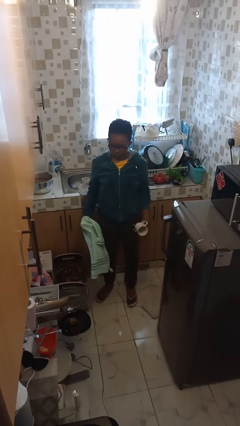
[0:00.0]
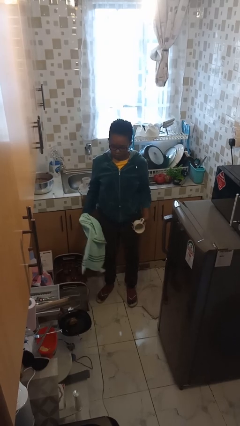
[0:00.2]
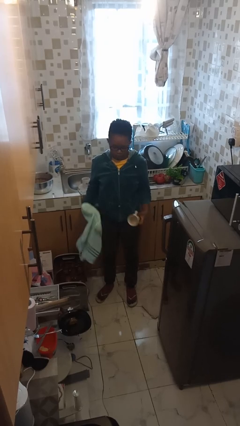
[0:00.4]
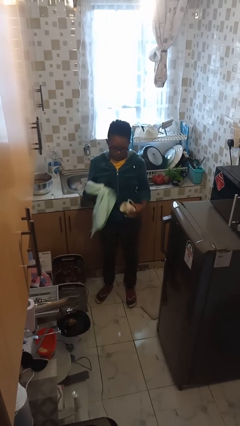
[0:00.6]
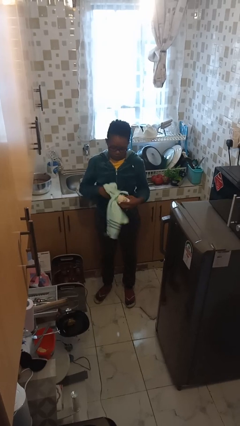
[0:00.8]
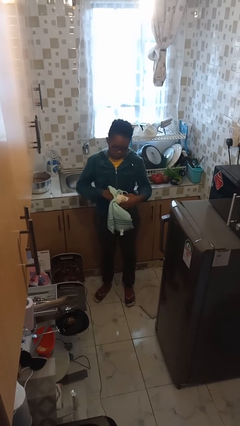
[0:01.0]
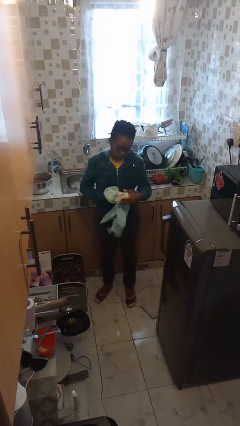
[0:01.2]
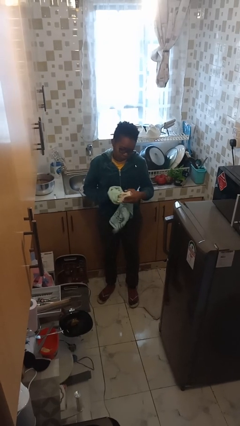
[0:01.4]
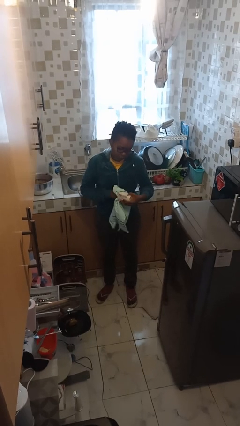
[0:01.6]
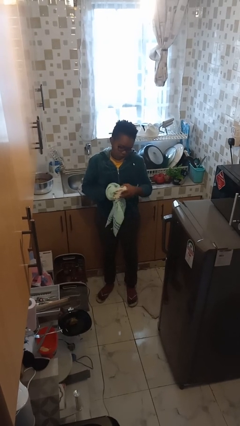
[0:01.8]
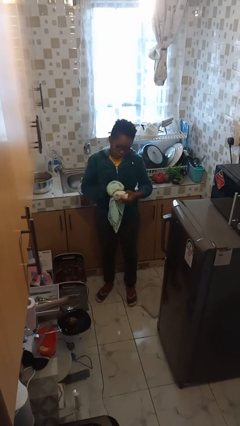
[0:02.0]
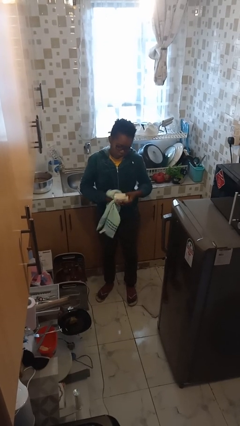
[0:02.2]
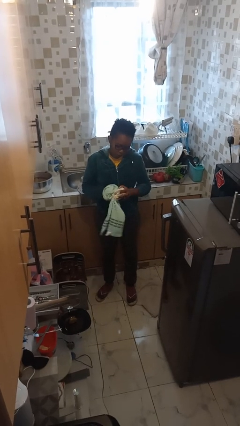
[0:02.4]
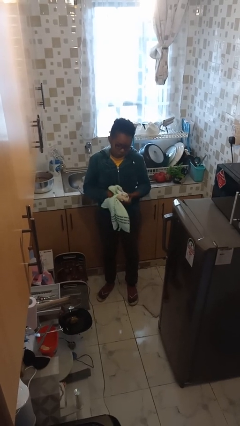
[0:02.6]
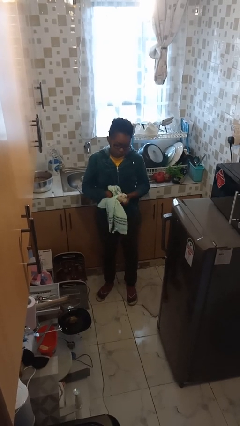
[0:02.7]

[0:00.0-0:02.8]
person dries dish

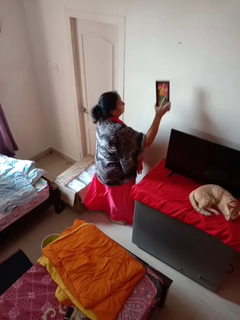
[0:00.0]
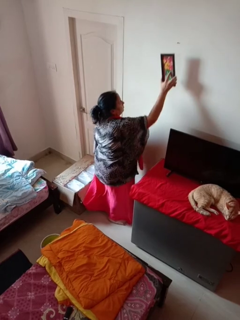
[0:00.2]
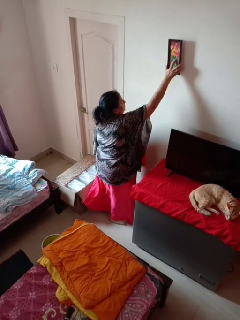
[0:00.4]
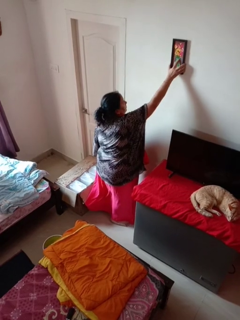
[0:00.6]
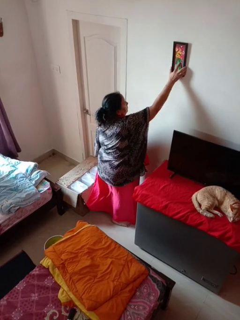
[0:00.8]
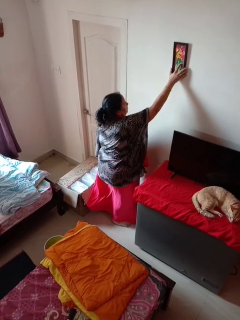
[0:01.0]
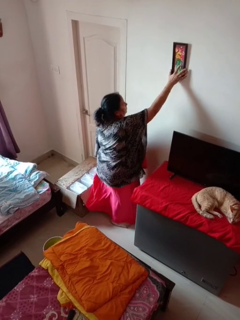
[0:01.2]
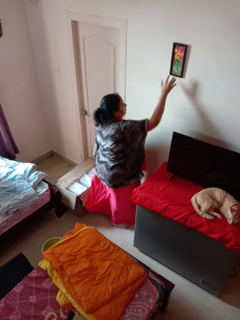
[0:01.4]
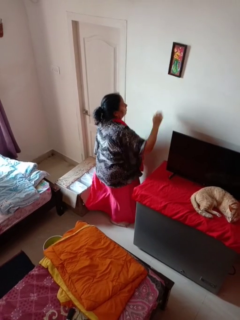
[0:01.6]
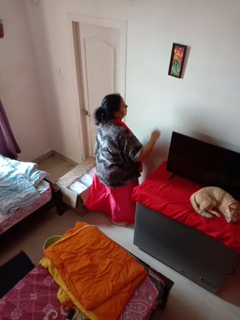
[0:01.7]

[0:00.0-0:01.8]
person puts up picture frame

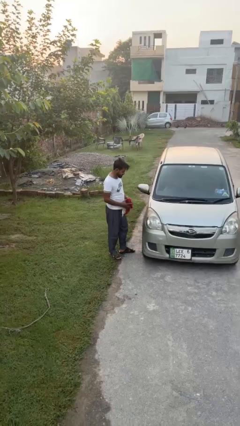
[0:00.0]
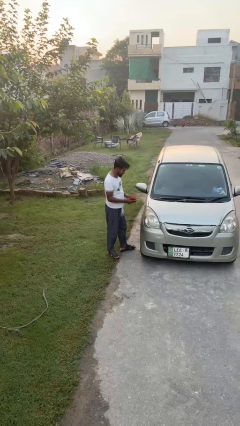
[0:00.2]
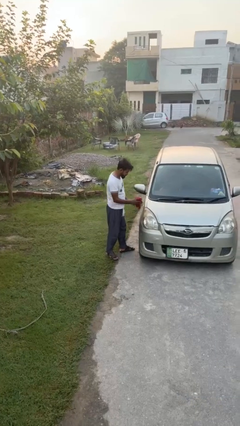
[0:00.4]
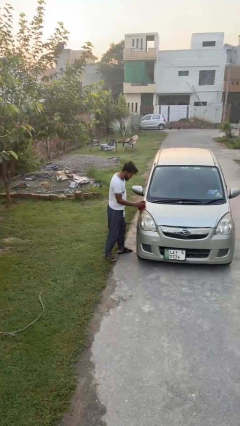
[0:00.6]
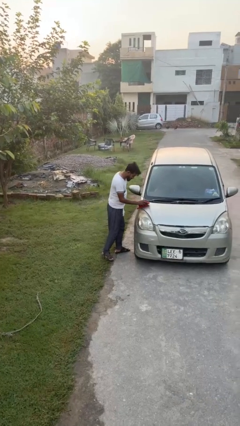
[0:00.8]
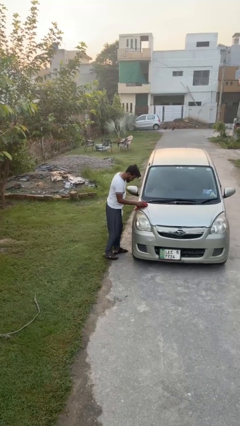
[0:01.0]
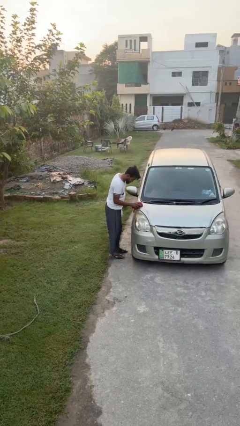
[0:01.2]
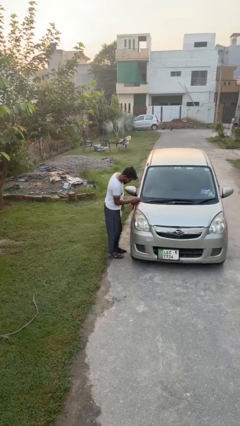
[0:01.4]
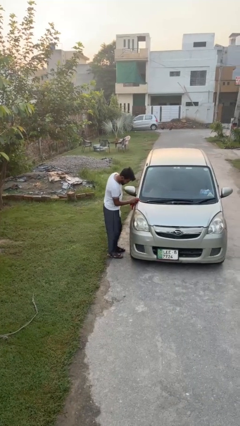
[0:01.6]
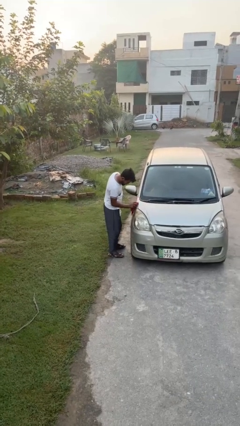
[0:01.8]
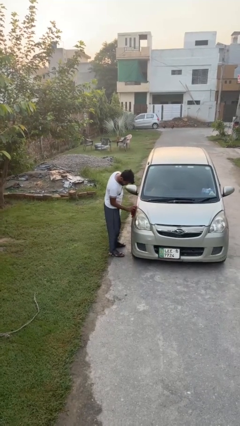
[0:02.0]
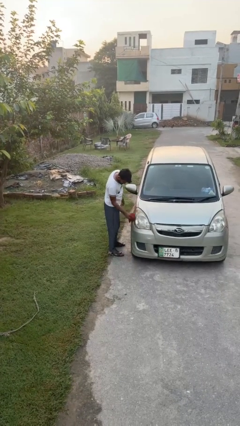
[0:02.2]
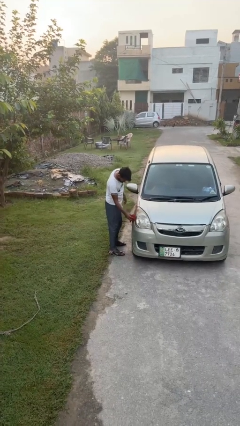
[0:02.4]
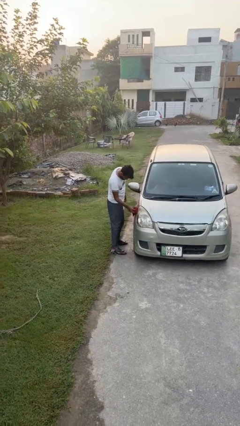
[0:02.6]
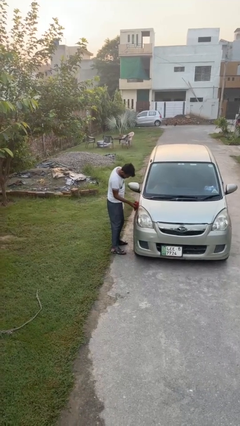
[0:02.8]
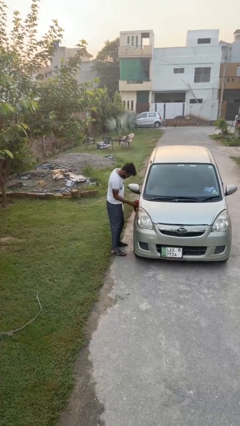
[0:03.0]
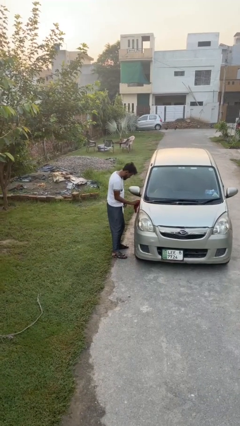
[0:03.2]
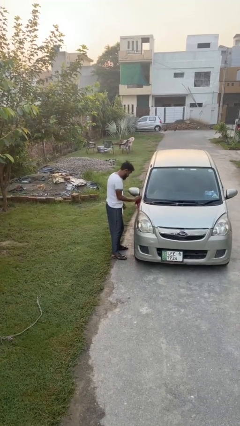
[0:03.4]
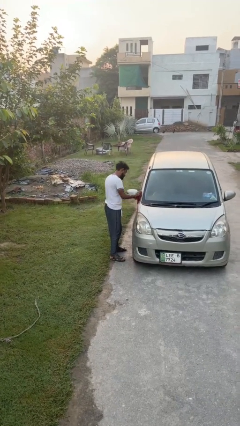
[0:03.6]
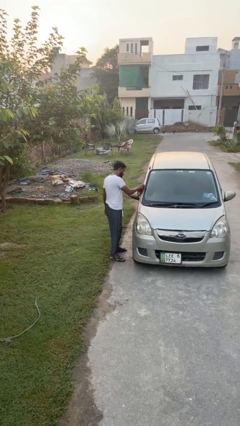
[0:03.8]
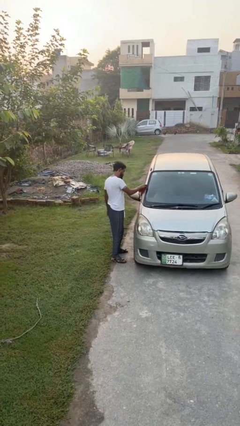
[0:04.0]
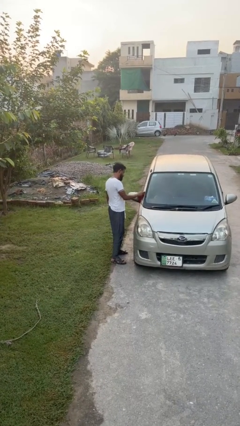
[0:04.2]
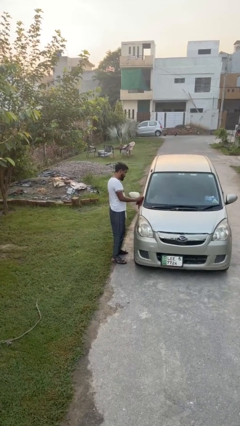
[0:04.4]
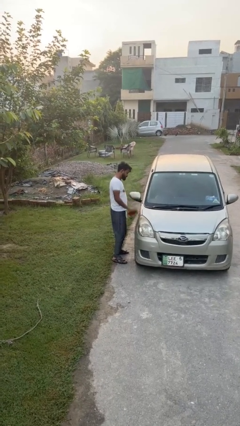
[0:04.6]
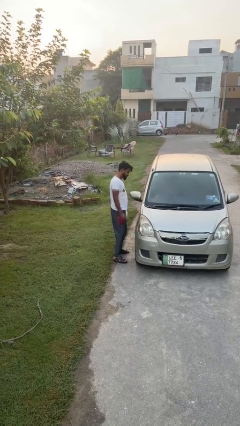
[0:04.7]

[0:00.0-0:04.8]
person polishes car with rag

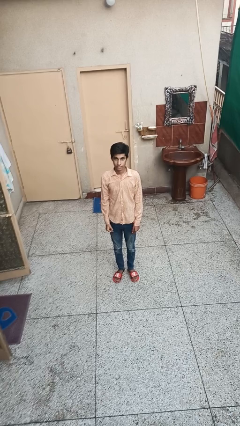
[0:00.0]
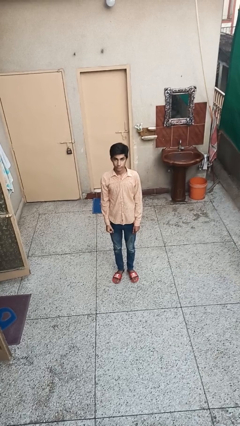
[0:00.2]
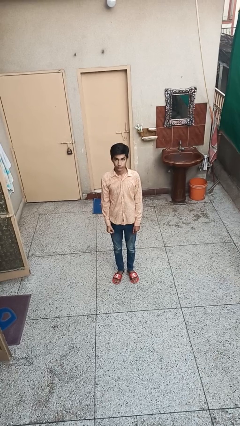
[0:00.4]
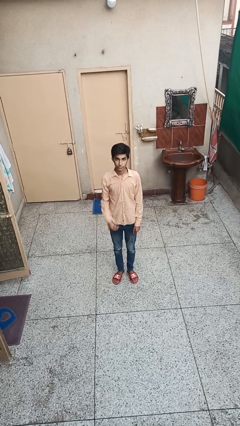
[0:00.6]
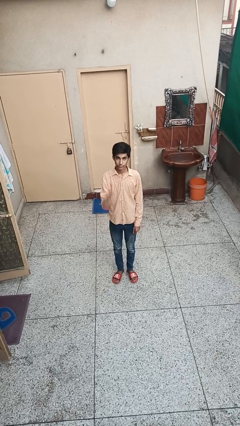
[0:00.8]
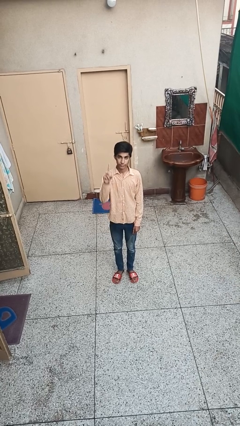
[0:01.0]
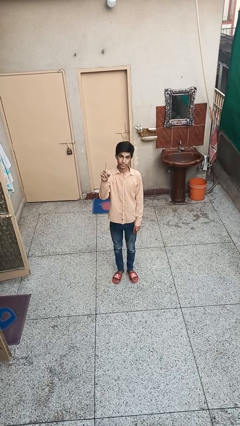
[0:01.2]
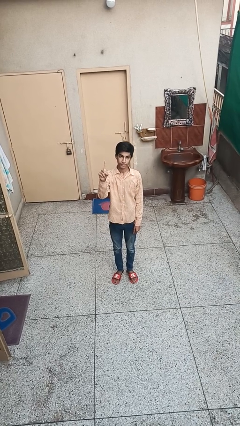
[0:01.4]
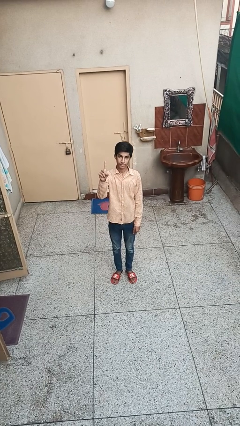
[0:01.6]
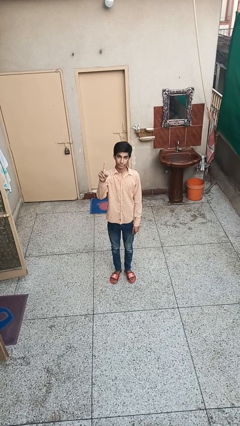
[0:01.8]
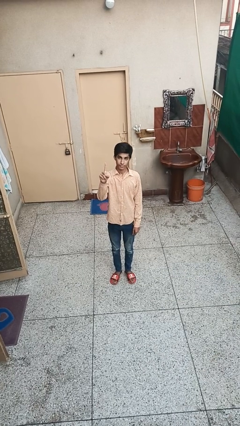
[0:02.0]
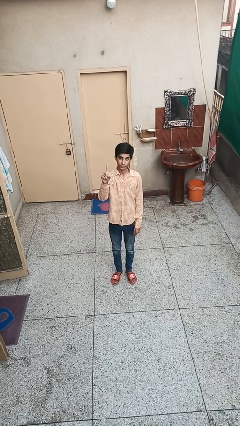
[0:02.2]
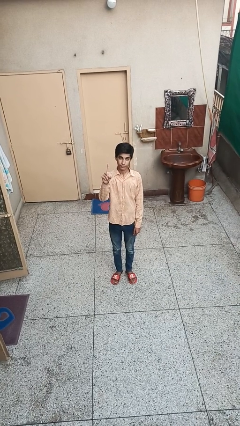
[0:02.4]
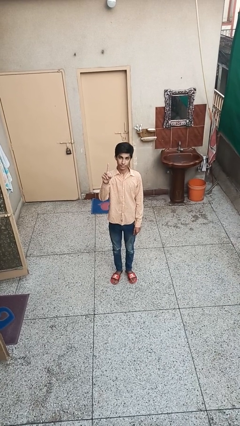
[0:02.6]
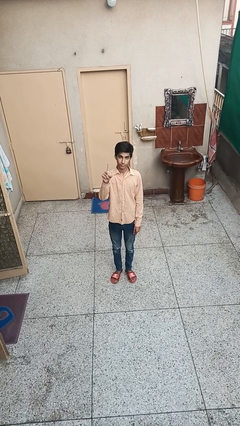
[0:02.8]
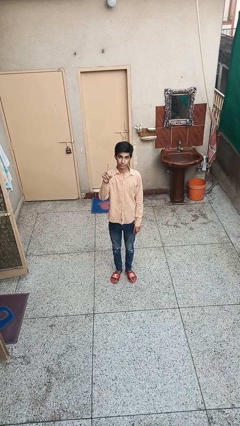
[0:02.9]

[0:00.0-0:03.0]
person gestures number one

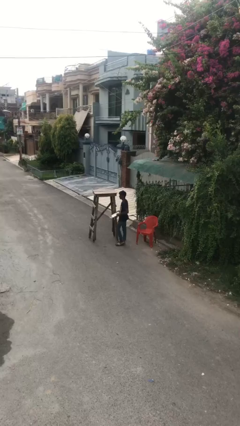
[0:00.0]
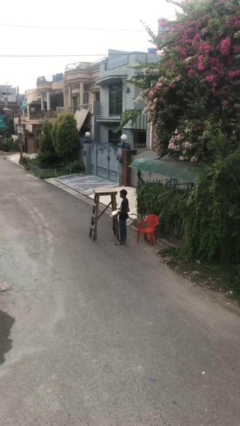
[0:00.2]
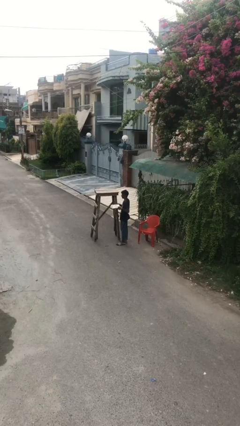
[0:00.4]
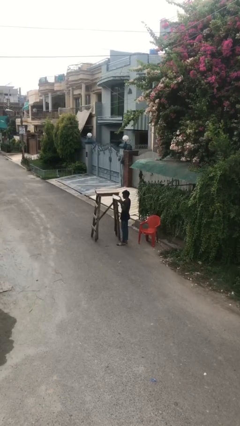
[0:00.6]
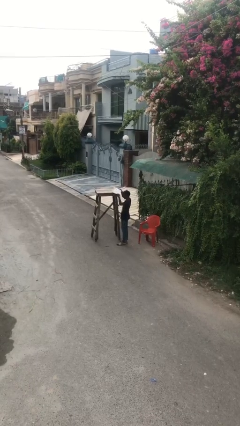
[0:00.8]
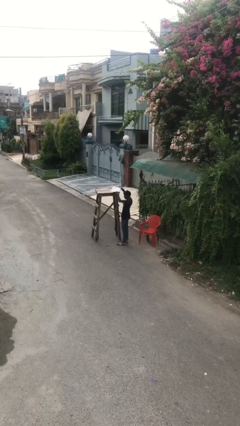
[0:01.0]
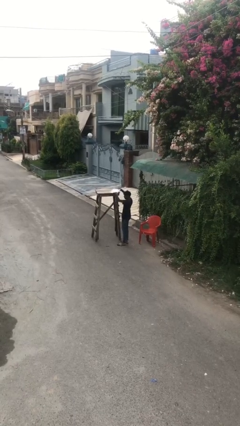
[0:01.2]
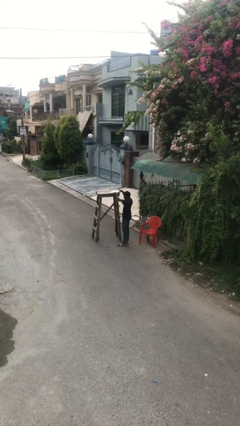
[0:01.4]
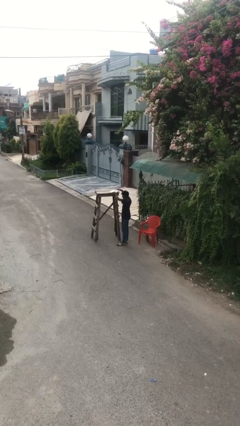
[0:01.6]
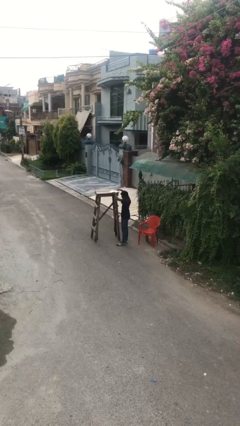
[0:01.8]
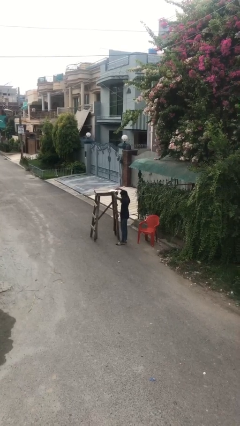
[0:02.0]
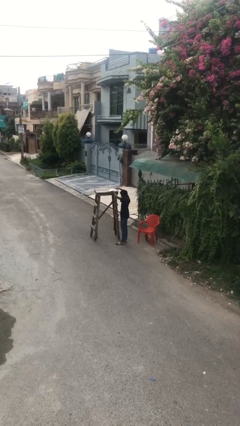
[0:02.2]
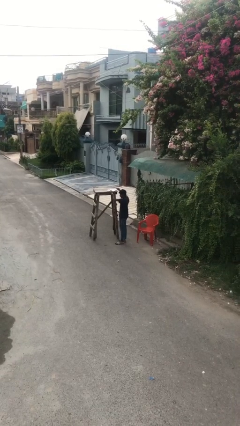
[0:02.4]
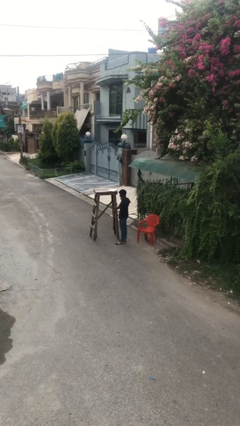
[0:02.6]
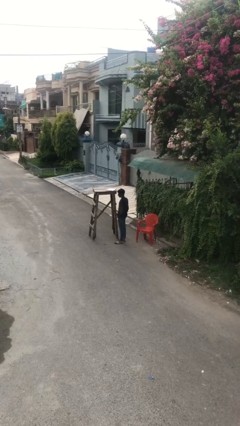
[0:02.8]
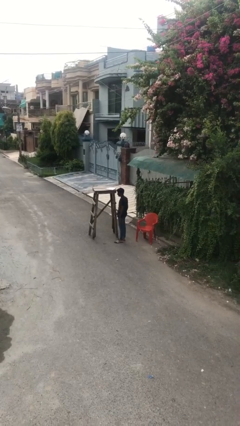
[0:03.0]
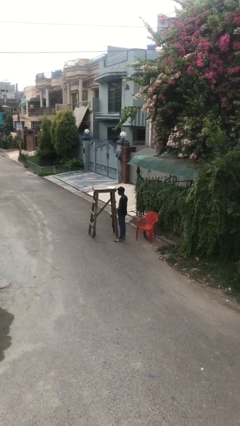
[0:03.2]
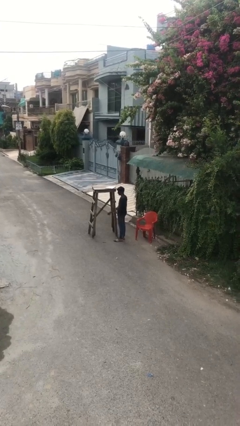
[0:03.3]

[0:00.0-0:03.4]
person puts down object on shelf

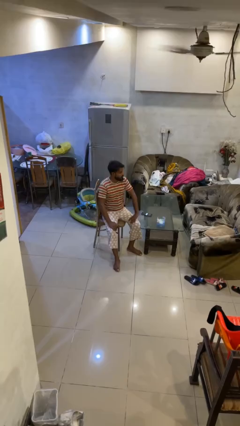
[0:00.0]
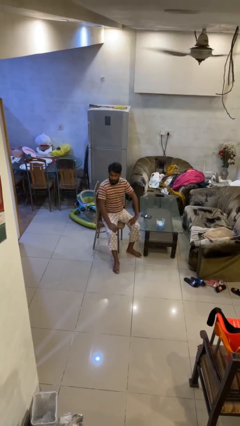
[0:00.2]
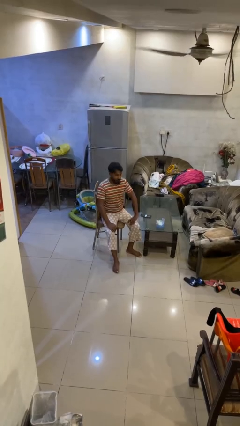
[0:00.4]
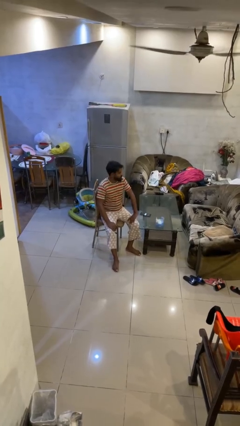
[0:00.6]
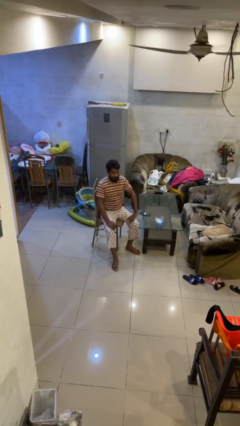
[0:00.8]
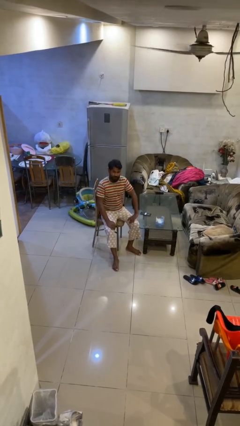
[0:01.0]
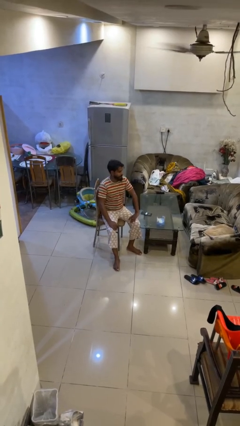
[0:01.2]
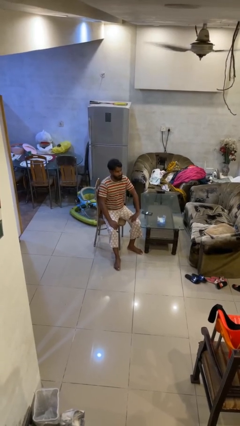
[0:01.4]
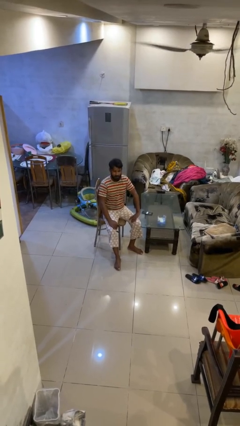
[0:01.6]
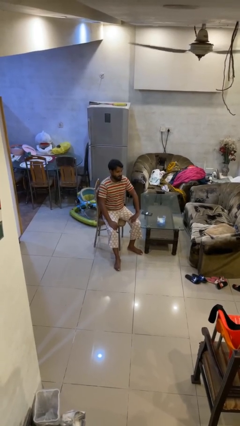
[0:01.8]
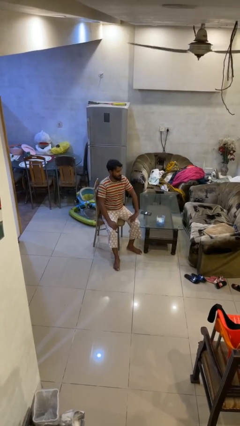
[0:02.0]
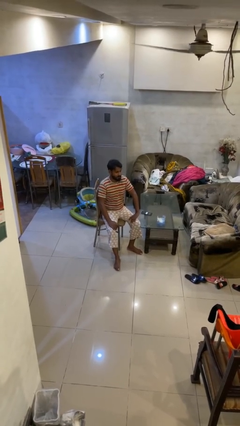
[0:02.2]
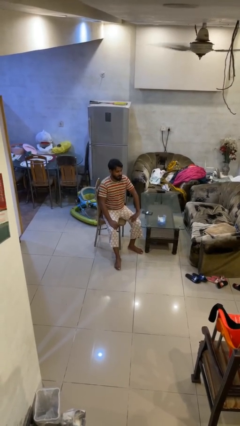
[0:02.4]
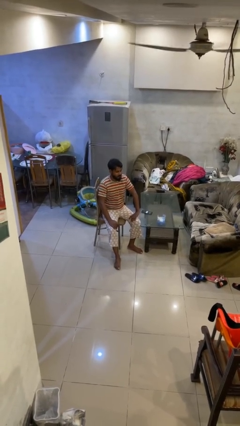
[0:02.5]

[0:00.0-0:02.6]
person shakes head
